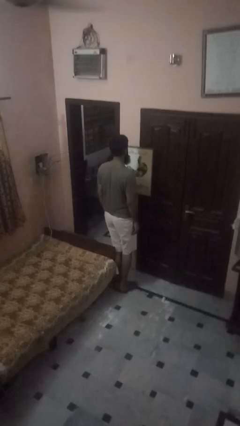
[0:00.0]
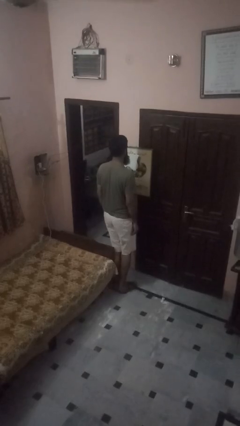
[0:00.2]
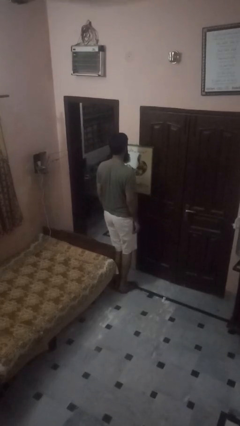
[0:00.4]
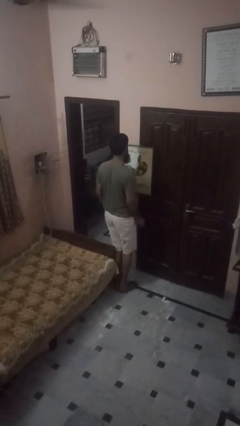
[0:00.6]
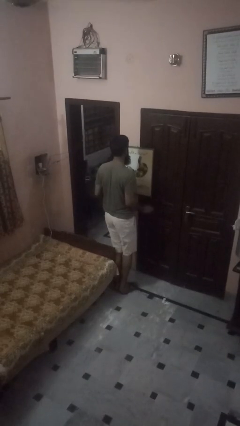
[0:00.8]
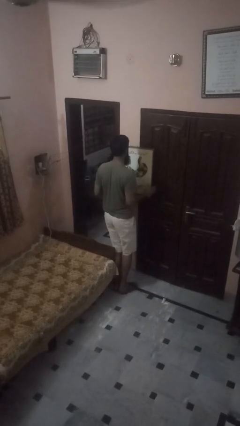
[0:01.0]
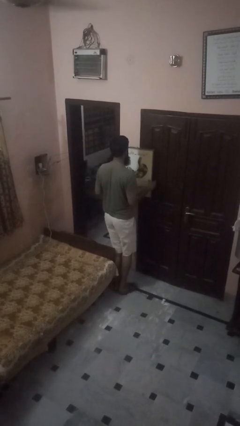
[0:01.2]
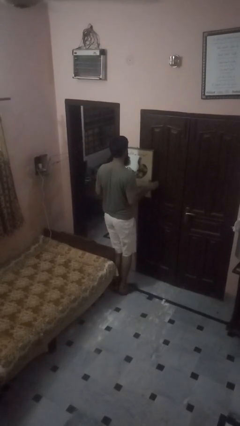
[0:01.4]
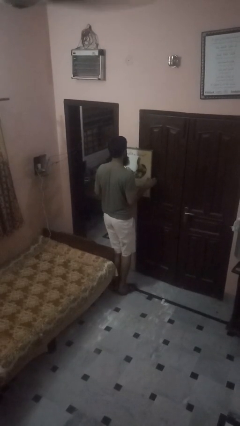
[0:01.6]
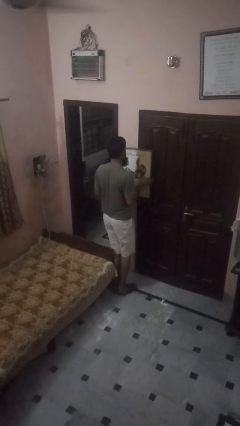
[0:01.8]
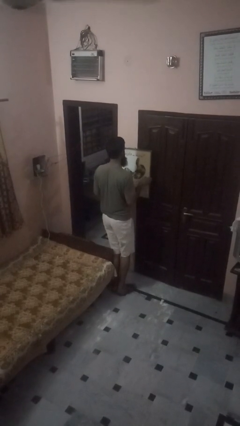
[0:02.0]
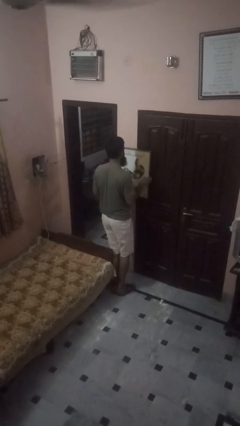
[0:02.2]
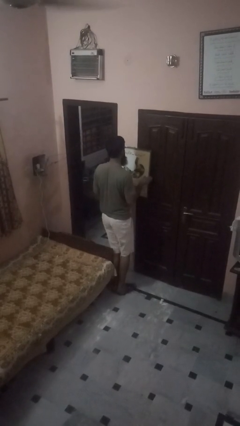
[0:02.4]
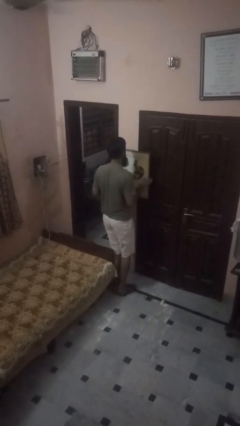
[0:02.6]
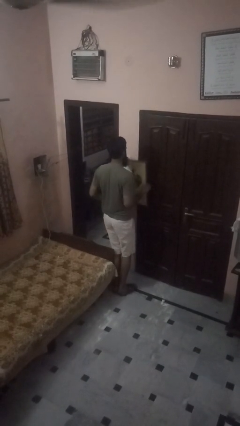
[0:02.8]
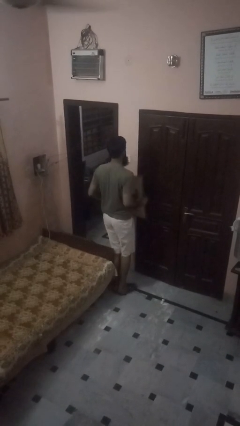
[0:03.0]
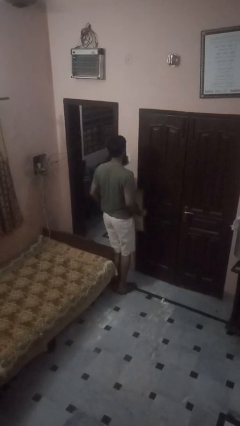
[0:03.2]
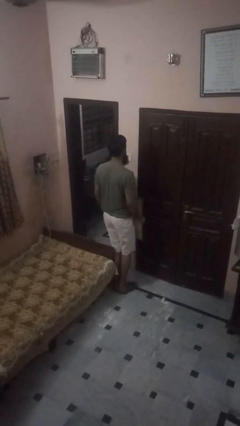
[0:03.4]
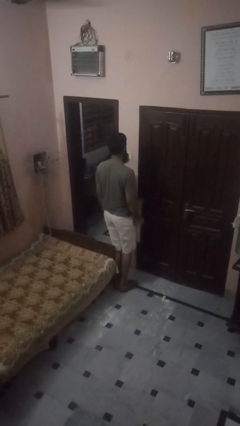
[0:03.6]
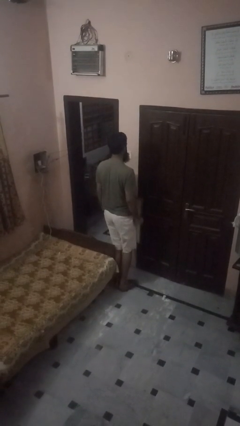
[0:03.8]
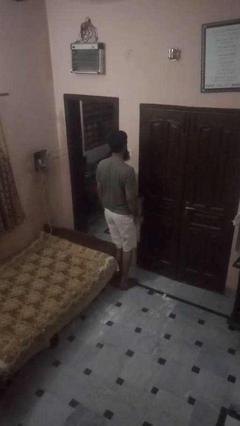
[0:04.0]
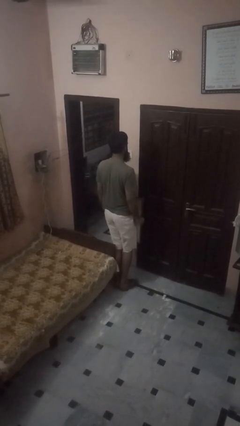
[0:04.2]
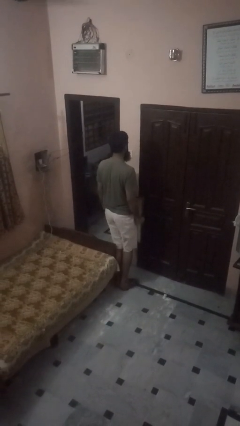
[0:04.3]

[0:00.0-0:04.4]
person takes down picture frame

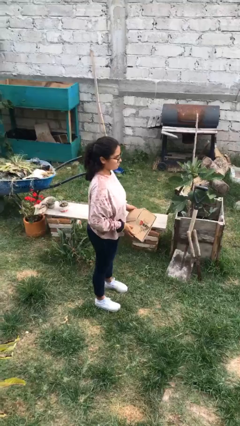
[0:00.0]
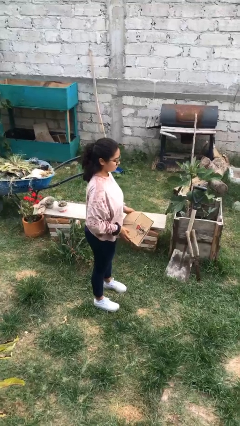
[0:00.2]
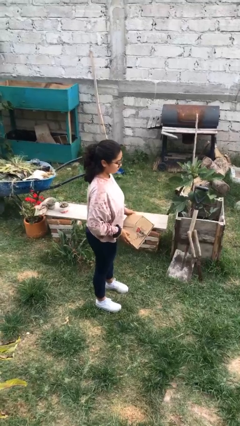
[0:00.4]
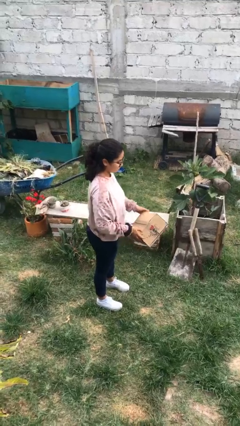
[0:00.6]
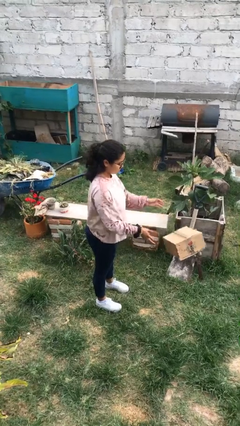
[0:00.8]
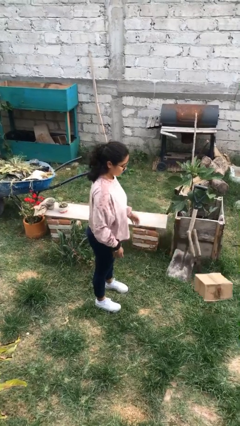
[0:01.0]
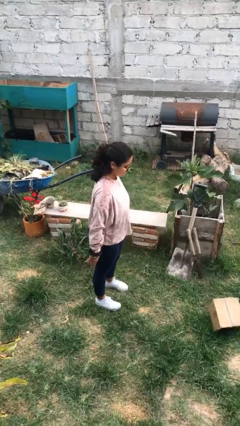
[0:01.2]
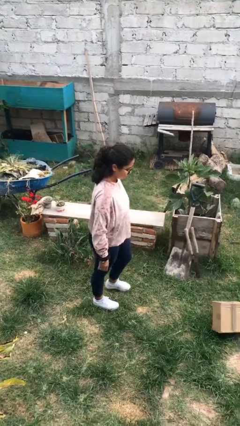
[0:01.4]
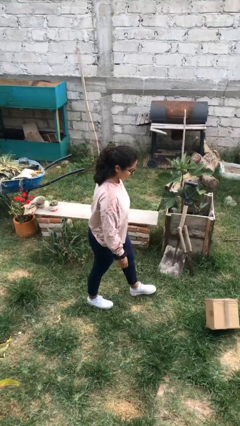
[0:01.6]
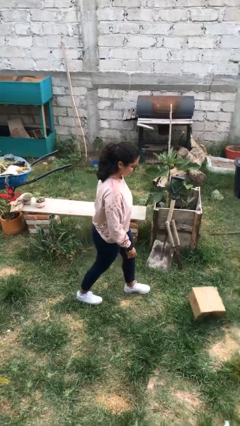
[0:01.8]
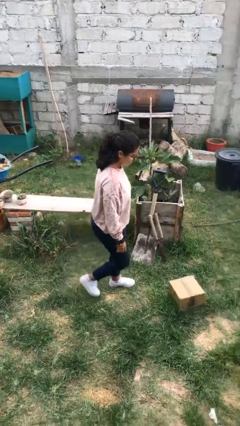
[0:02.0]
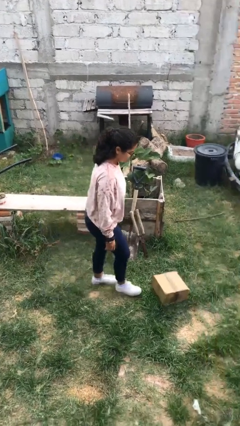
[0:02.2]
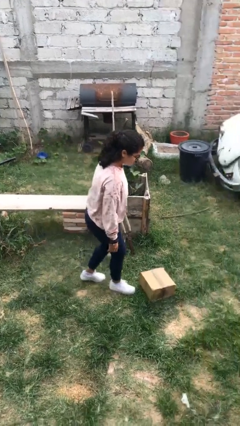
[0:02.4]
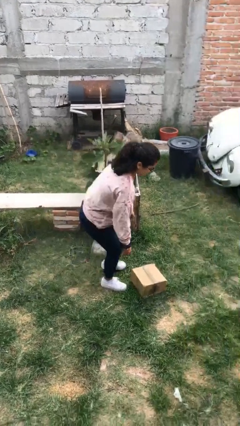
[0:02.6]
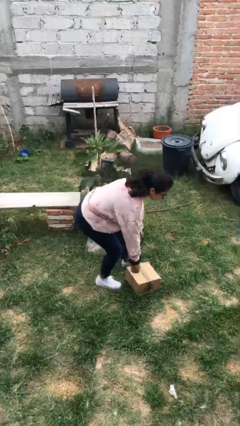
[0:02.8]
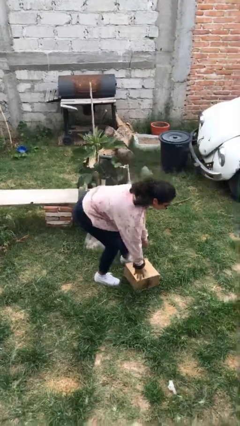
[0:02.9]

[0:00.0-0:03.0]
person throws object to ground

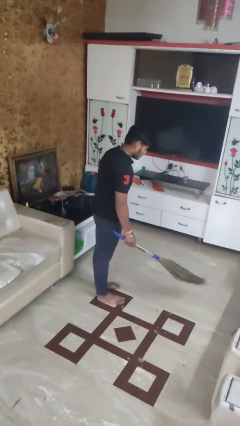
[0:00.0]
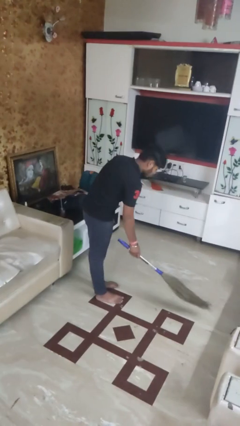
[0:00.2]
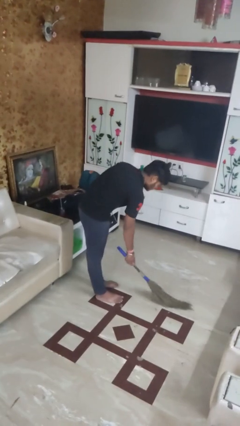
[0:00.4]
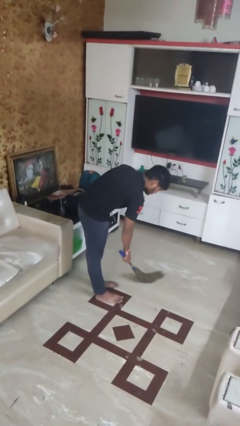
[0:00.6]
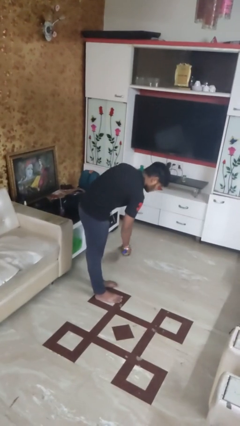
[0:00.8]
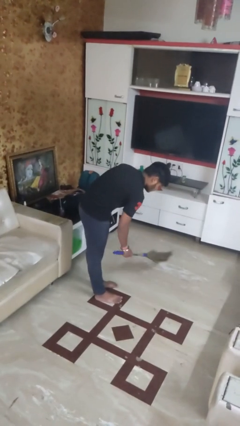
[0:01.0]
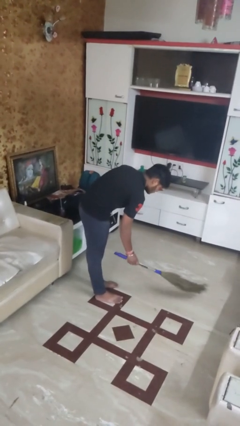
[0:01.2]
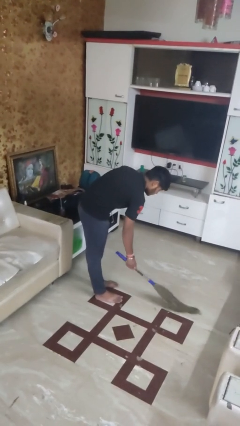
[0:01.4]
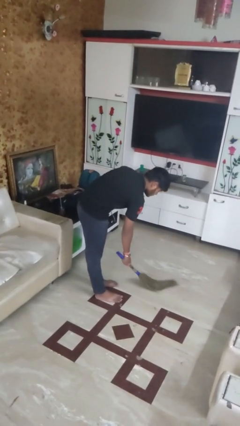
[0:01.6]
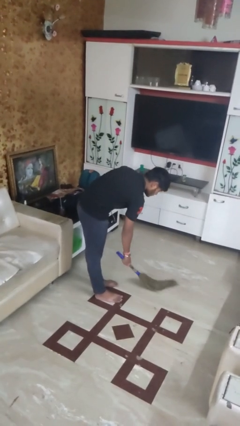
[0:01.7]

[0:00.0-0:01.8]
person sweeps floor

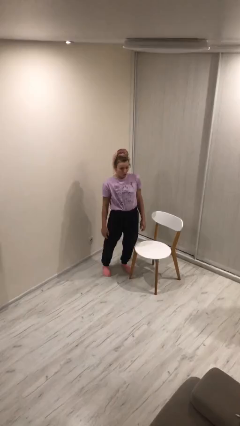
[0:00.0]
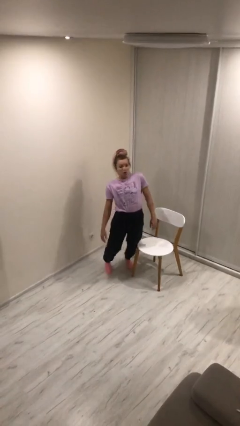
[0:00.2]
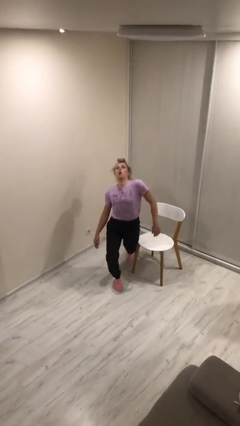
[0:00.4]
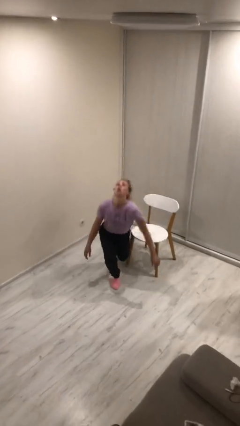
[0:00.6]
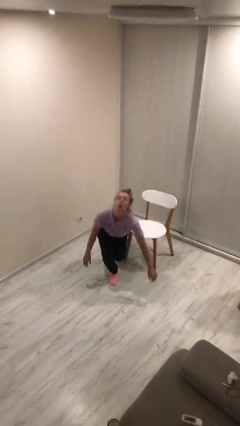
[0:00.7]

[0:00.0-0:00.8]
person trips on object on floor

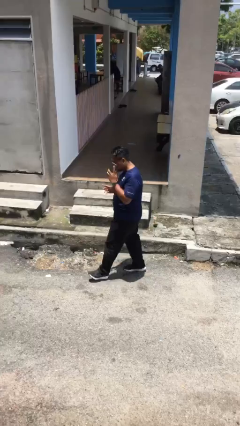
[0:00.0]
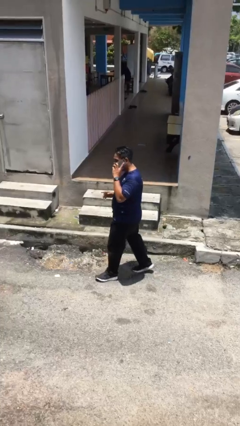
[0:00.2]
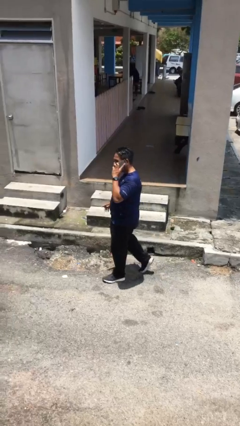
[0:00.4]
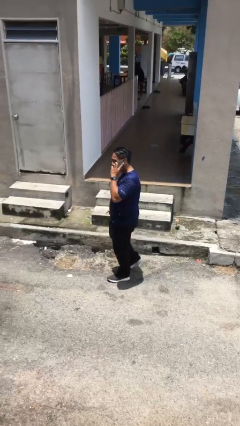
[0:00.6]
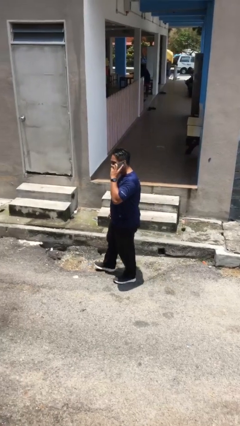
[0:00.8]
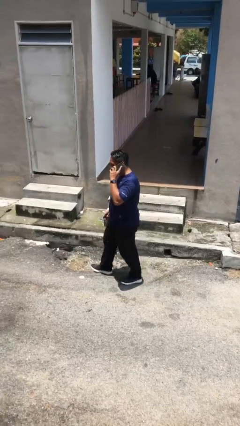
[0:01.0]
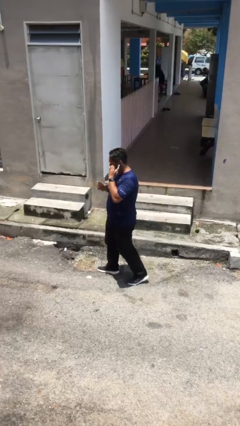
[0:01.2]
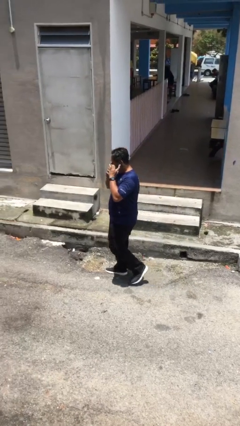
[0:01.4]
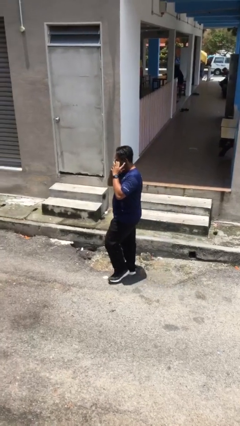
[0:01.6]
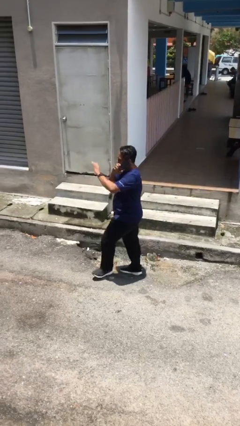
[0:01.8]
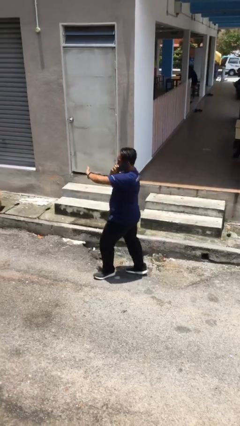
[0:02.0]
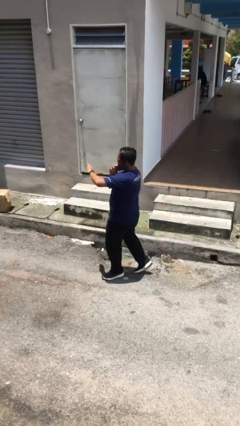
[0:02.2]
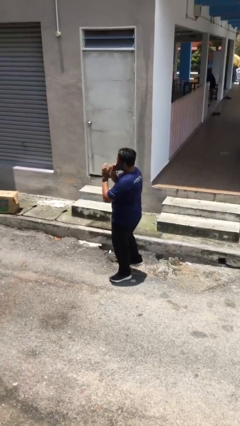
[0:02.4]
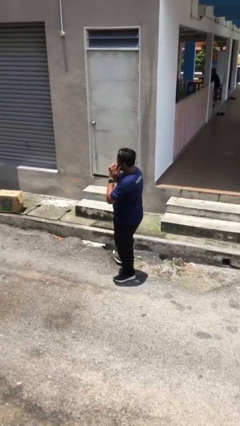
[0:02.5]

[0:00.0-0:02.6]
person talks on phone

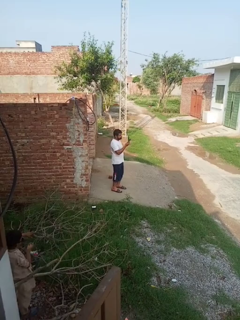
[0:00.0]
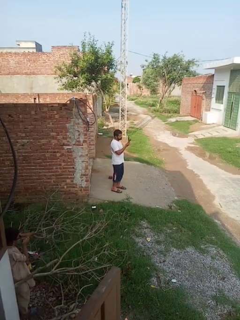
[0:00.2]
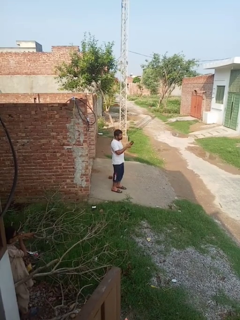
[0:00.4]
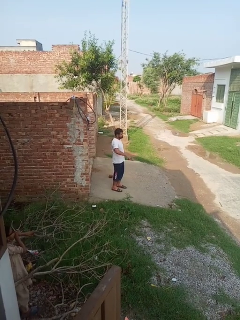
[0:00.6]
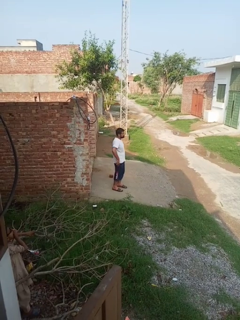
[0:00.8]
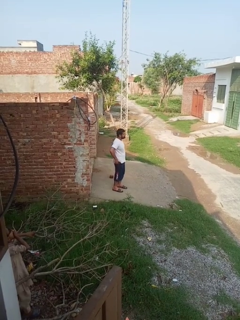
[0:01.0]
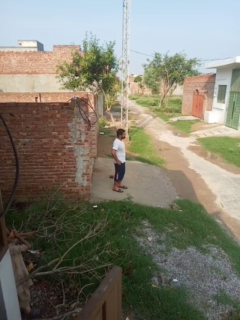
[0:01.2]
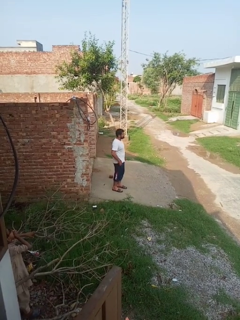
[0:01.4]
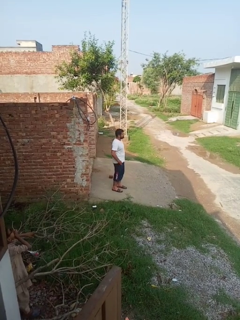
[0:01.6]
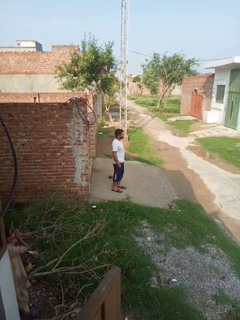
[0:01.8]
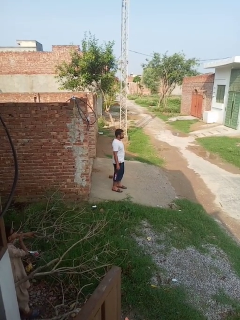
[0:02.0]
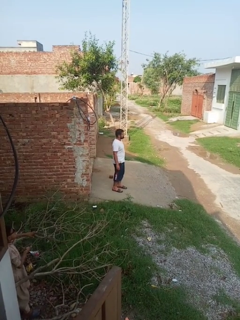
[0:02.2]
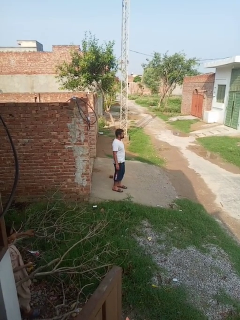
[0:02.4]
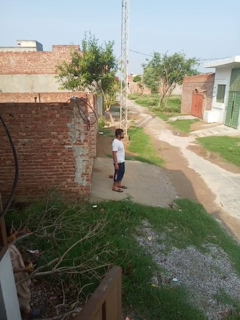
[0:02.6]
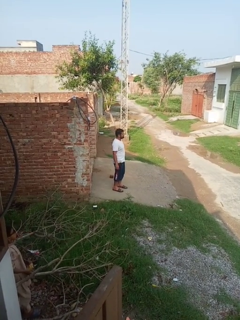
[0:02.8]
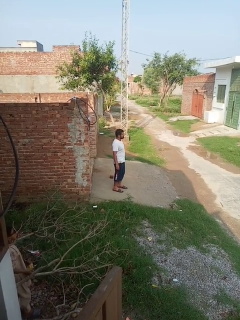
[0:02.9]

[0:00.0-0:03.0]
person puts phone into pocket

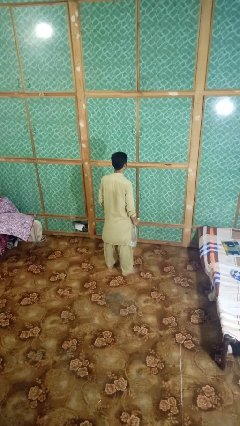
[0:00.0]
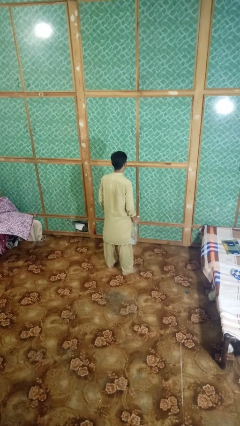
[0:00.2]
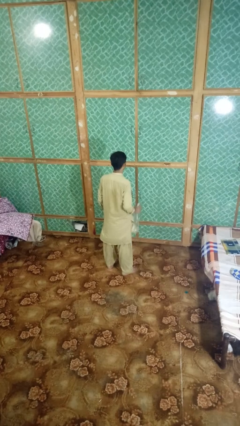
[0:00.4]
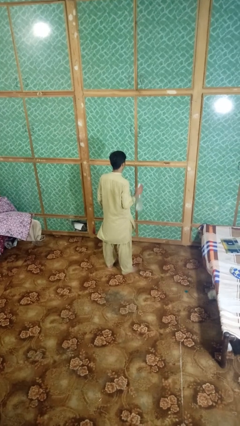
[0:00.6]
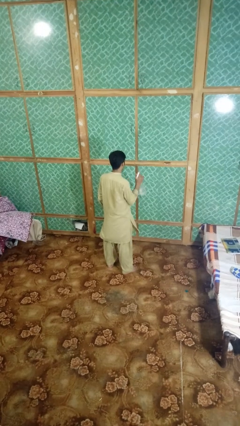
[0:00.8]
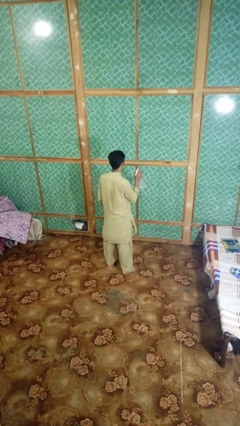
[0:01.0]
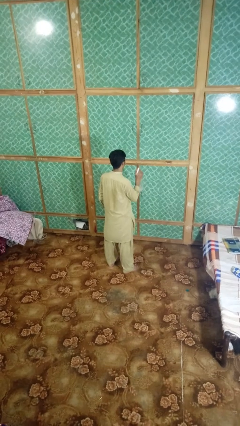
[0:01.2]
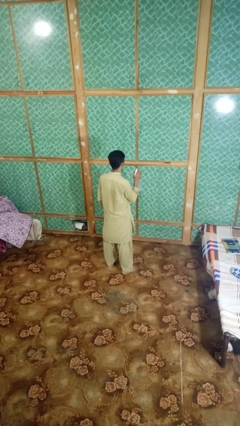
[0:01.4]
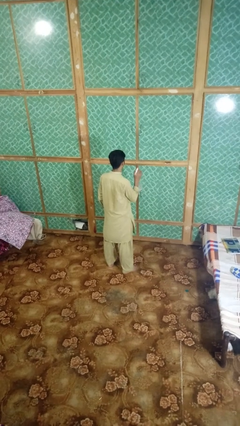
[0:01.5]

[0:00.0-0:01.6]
person sprays from bottle

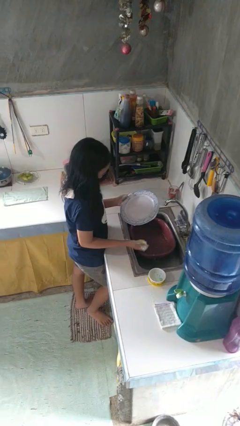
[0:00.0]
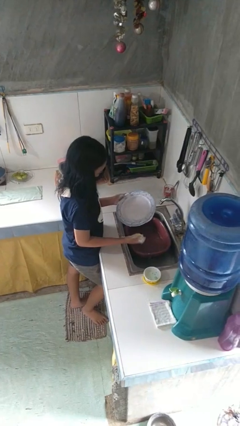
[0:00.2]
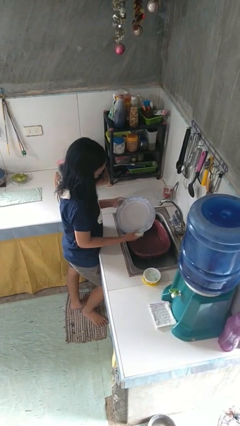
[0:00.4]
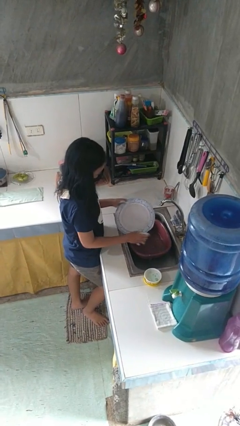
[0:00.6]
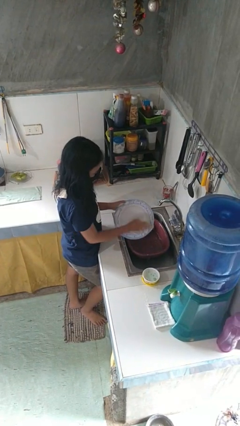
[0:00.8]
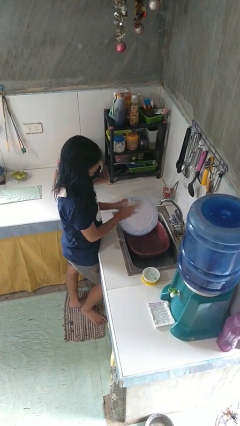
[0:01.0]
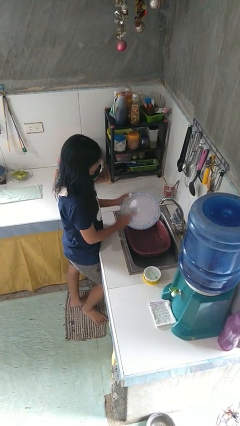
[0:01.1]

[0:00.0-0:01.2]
person washes dish
